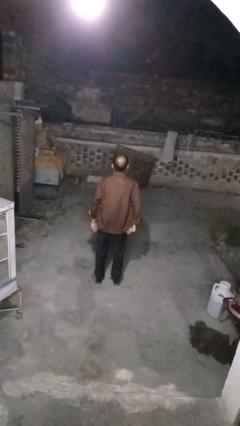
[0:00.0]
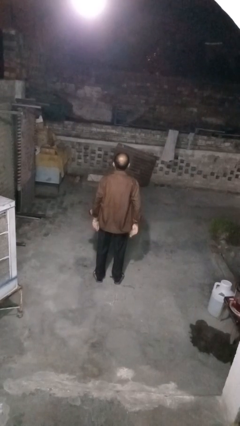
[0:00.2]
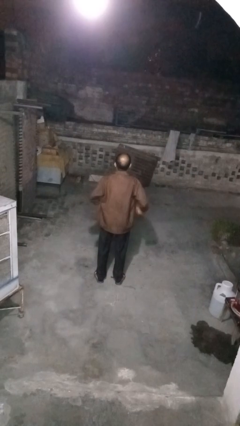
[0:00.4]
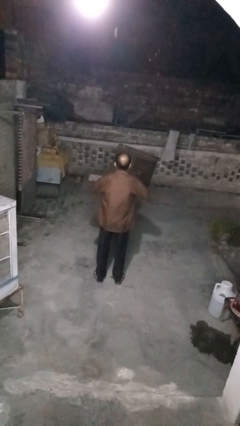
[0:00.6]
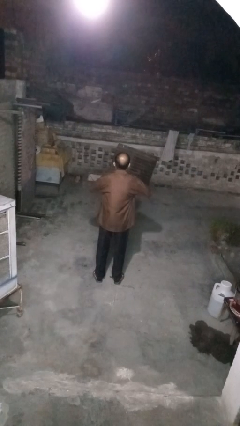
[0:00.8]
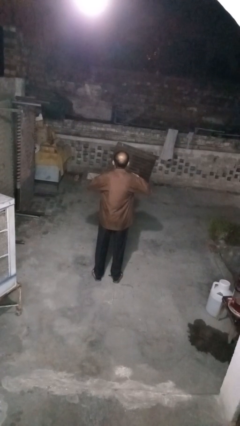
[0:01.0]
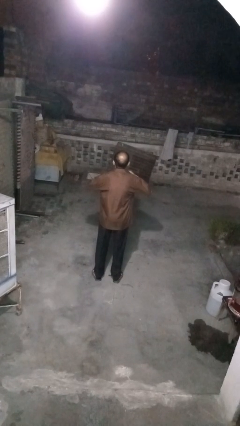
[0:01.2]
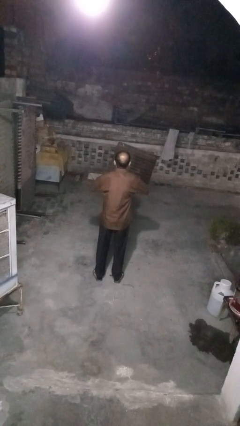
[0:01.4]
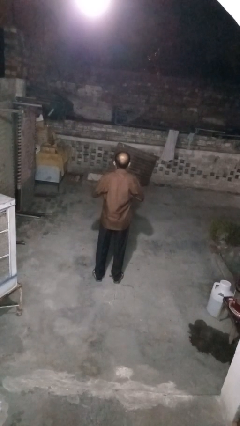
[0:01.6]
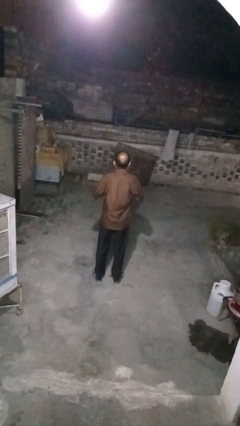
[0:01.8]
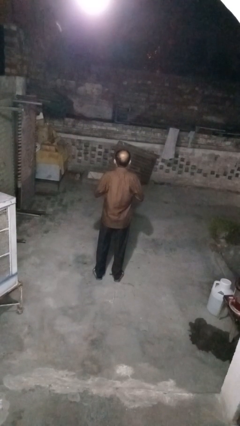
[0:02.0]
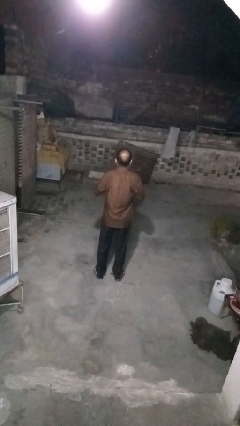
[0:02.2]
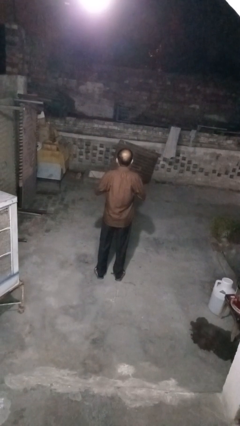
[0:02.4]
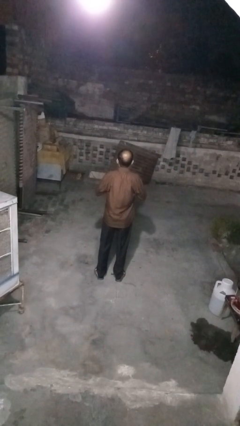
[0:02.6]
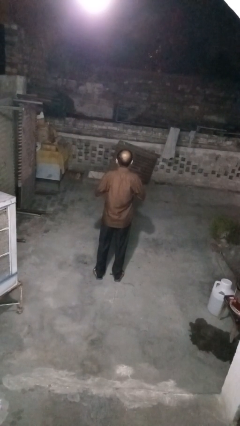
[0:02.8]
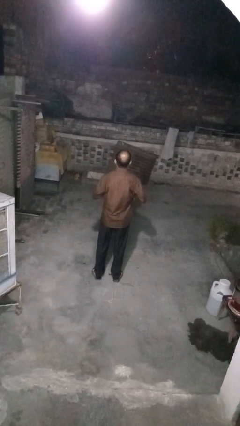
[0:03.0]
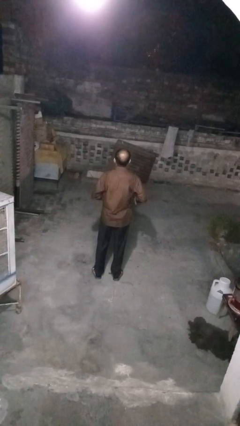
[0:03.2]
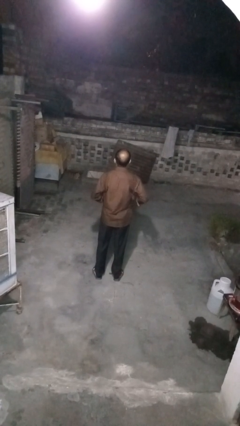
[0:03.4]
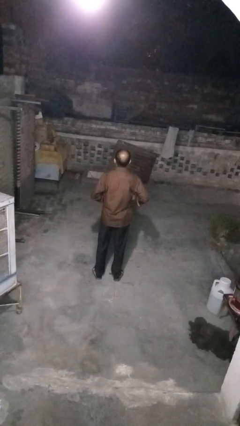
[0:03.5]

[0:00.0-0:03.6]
person buttons shirt

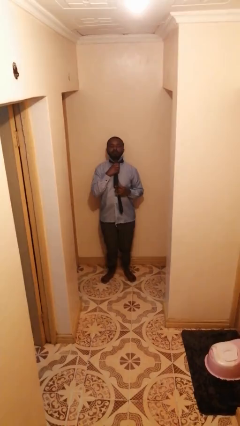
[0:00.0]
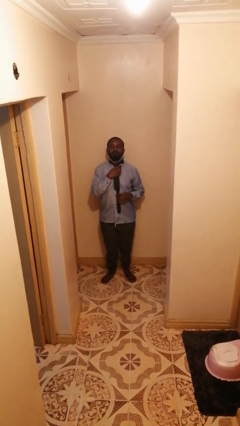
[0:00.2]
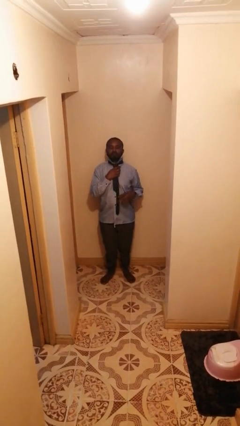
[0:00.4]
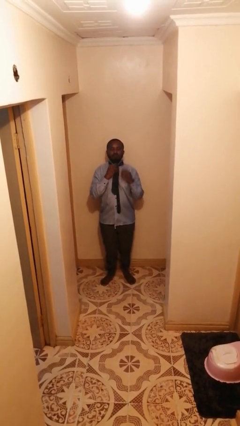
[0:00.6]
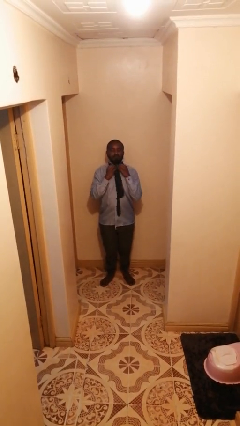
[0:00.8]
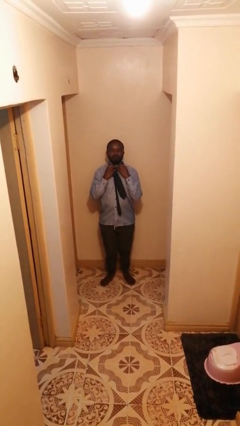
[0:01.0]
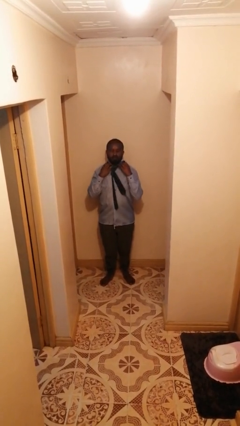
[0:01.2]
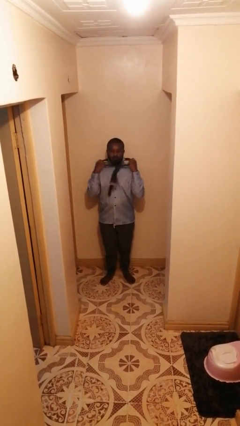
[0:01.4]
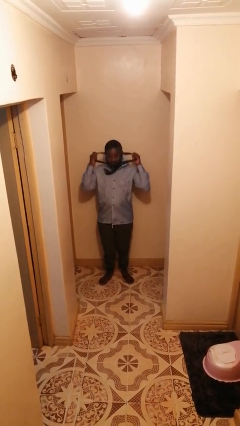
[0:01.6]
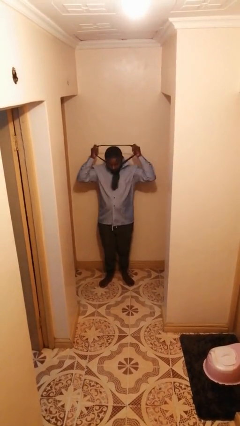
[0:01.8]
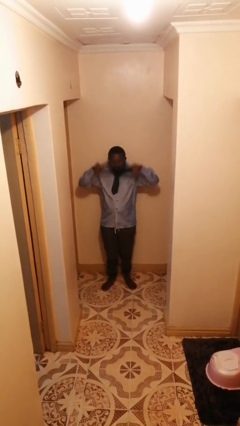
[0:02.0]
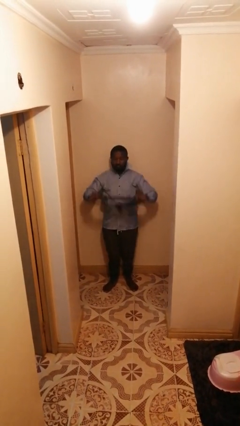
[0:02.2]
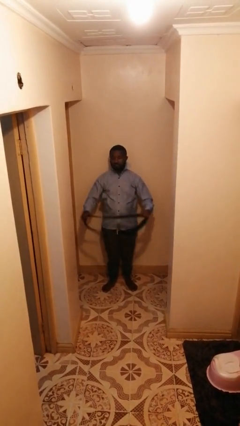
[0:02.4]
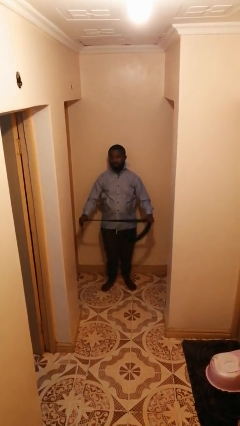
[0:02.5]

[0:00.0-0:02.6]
person takes off necktie

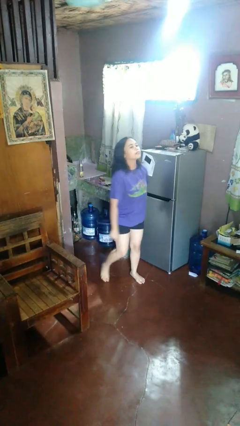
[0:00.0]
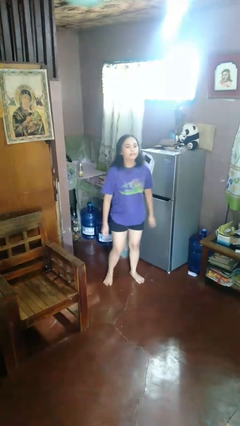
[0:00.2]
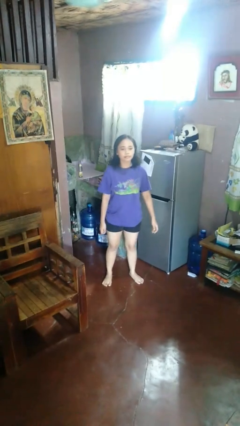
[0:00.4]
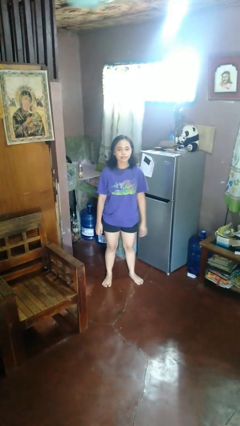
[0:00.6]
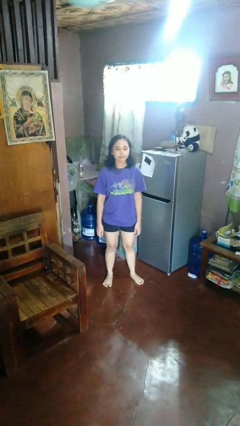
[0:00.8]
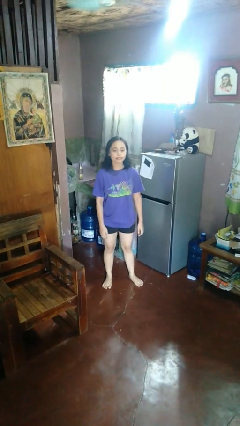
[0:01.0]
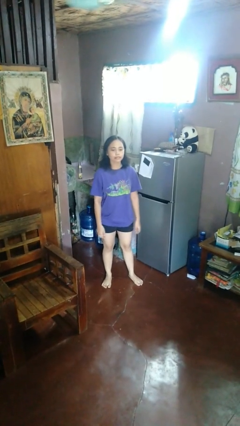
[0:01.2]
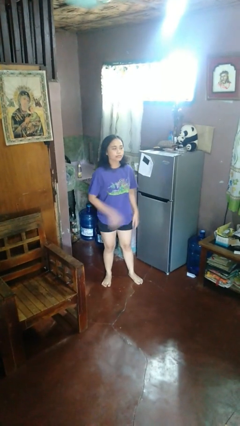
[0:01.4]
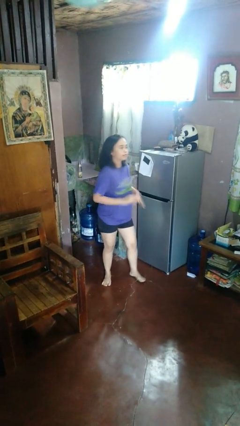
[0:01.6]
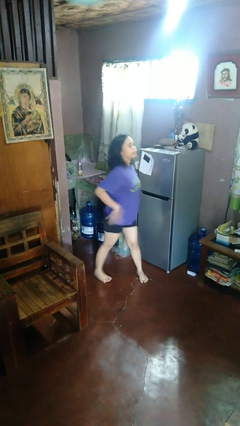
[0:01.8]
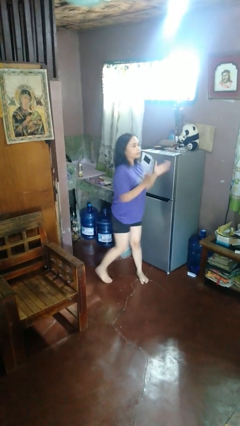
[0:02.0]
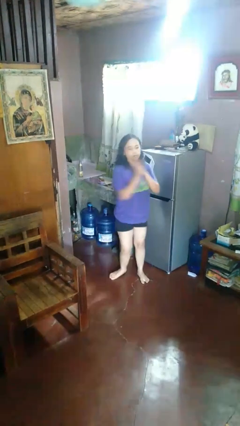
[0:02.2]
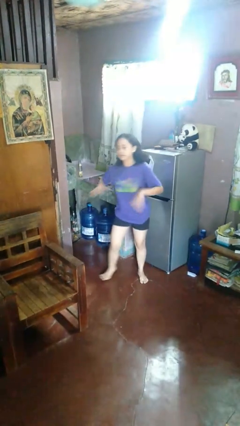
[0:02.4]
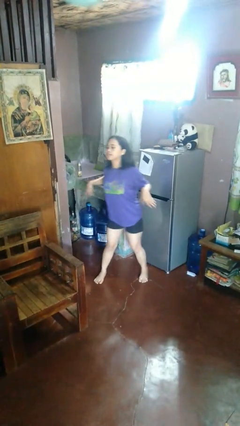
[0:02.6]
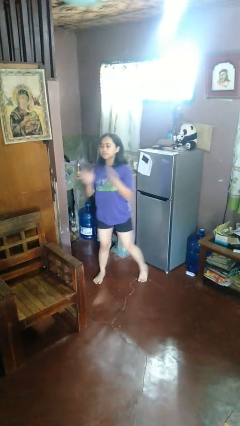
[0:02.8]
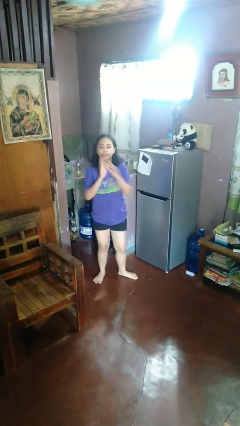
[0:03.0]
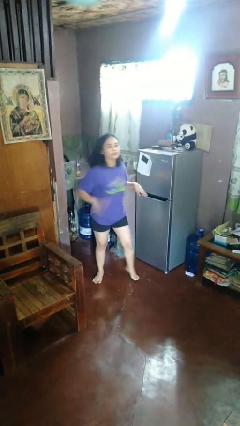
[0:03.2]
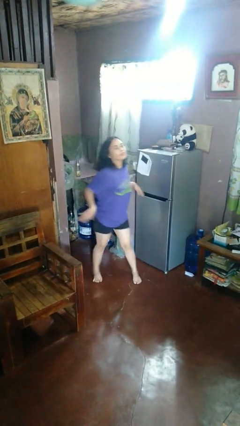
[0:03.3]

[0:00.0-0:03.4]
person dances in place

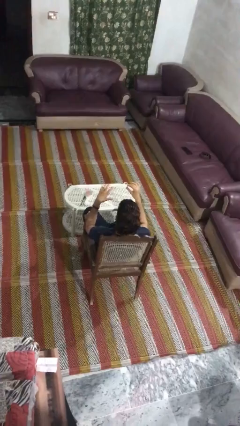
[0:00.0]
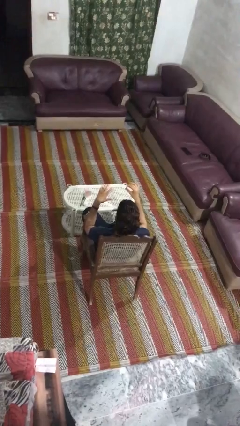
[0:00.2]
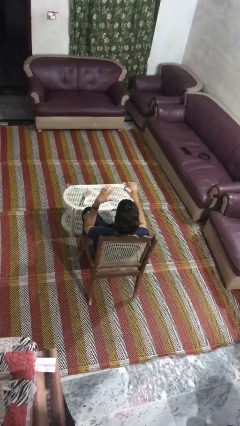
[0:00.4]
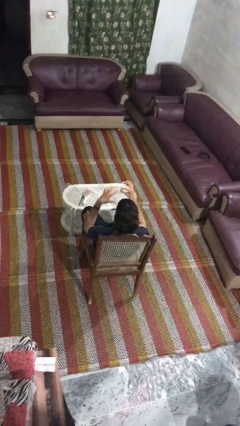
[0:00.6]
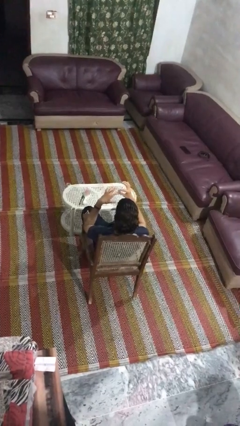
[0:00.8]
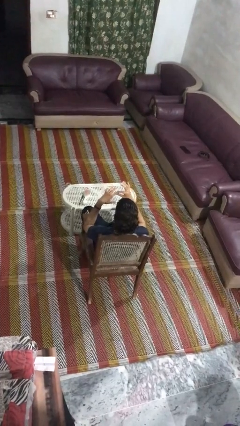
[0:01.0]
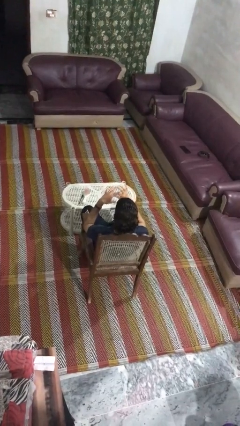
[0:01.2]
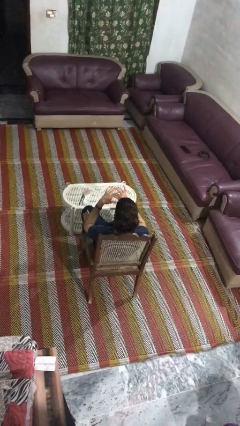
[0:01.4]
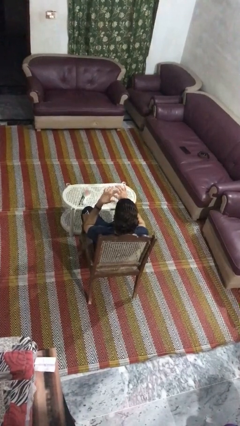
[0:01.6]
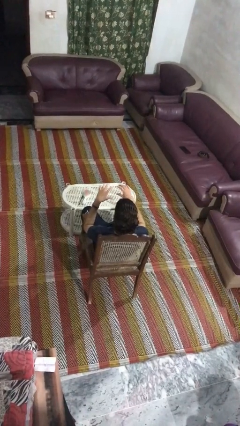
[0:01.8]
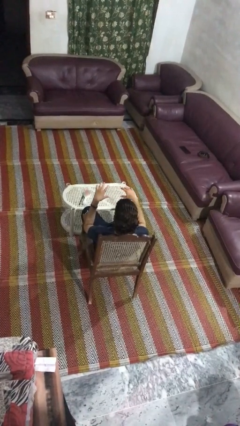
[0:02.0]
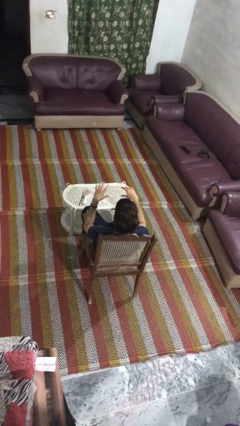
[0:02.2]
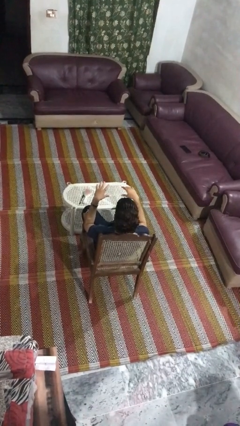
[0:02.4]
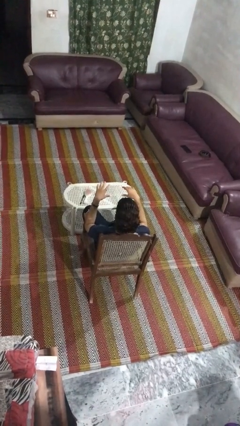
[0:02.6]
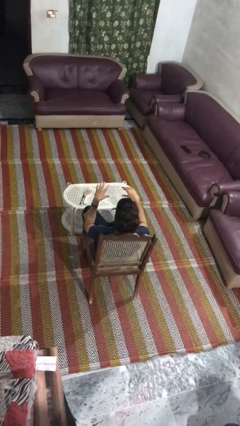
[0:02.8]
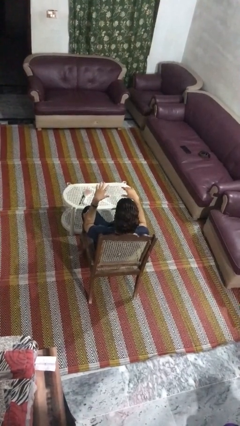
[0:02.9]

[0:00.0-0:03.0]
person puts on ring

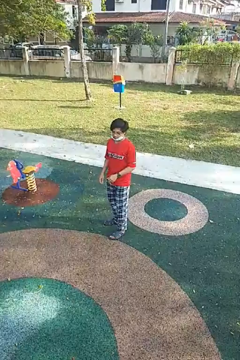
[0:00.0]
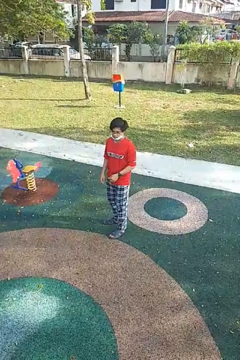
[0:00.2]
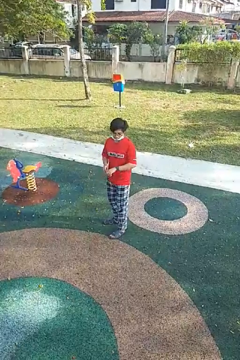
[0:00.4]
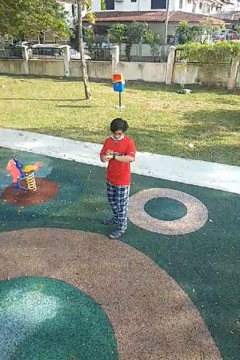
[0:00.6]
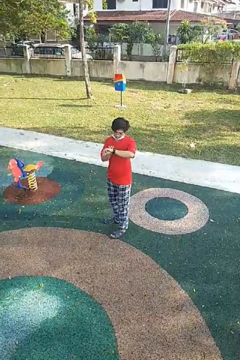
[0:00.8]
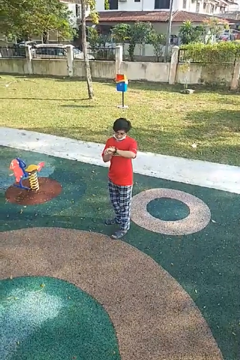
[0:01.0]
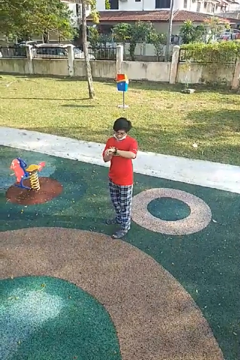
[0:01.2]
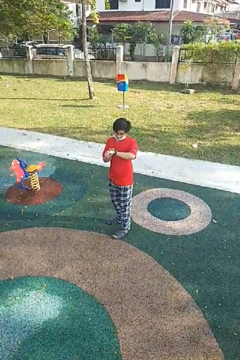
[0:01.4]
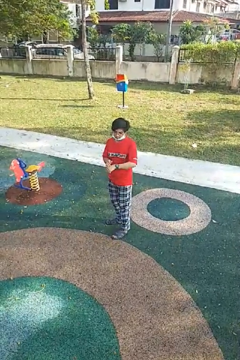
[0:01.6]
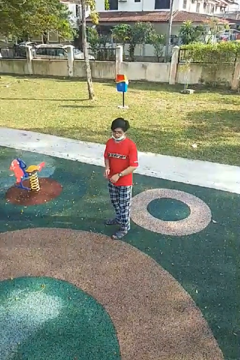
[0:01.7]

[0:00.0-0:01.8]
person looks at wristwatch

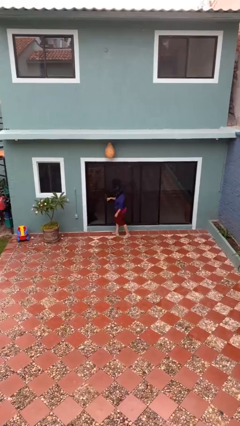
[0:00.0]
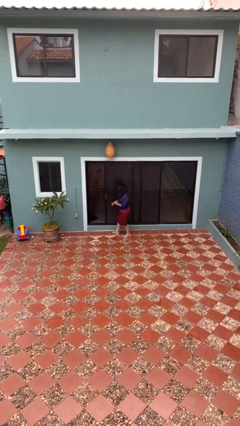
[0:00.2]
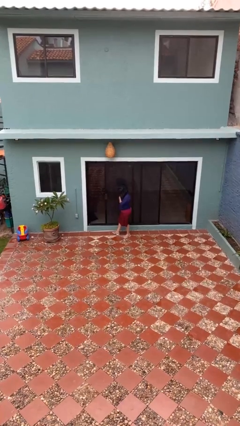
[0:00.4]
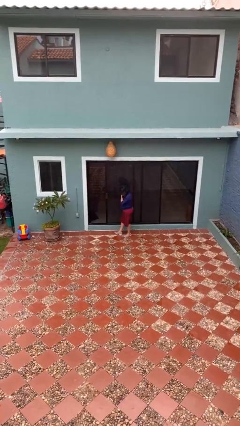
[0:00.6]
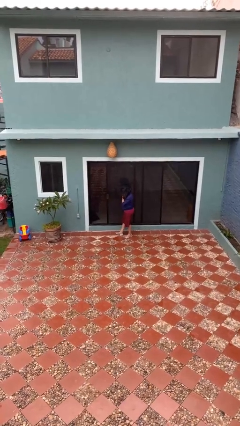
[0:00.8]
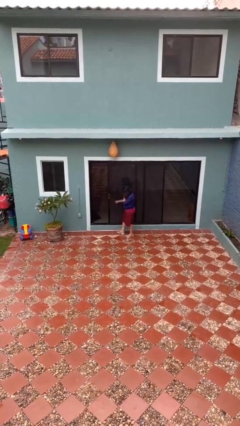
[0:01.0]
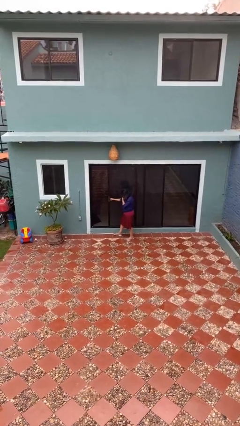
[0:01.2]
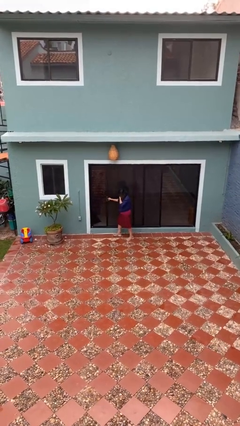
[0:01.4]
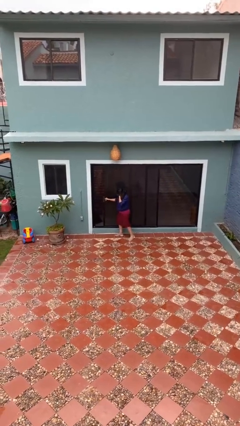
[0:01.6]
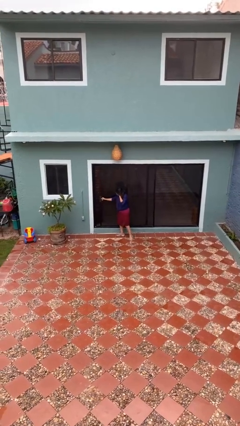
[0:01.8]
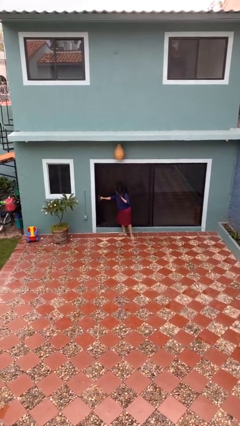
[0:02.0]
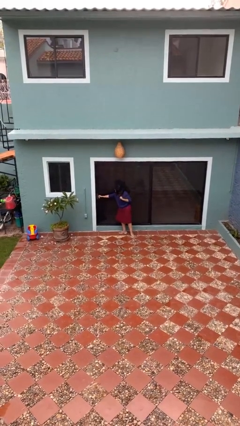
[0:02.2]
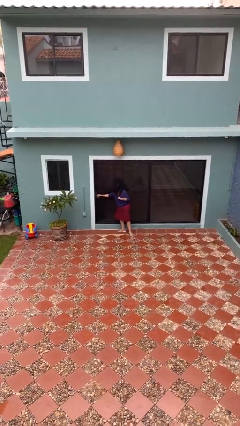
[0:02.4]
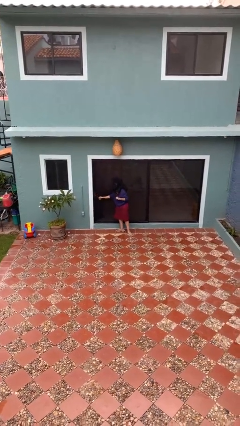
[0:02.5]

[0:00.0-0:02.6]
person closes sliding door
